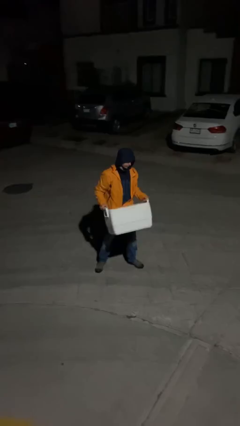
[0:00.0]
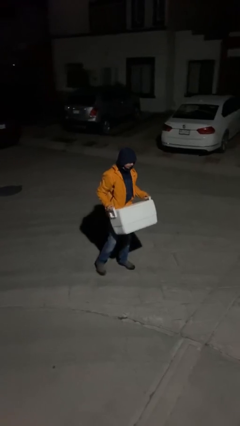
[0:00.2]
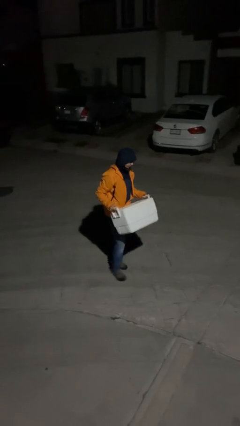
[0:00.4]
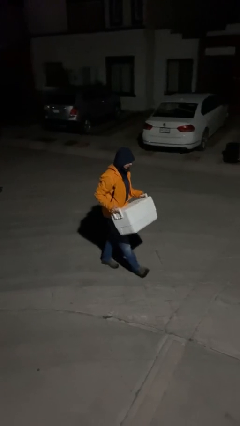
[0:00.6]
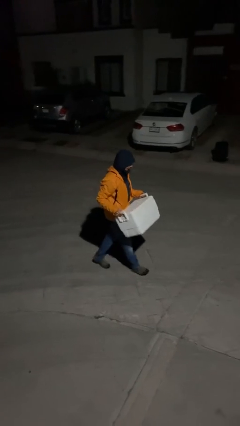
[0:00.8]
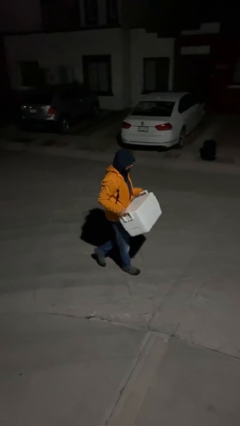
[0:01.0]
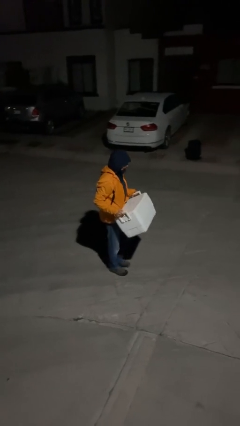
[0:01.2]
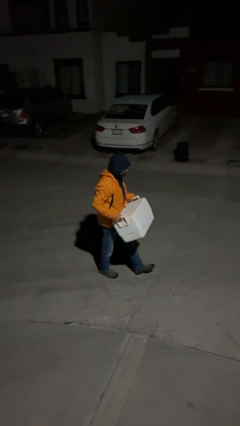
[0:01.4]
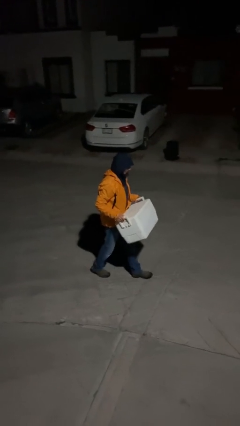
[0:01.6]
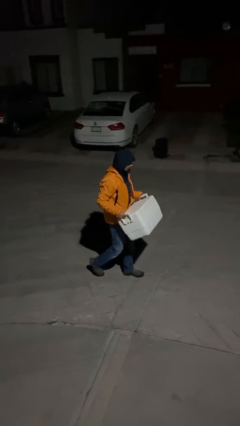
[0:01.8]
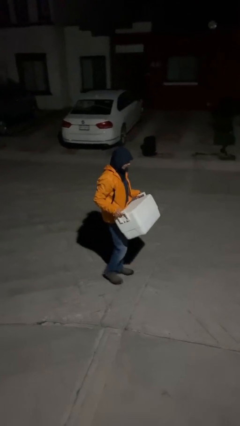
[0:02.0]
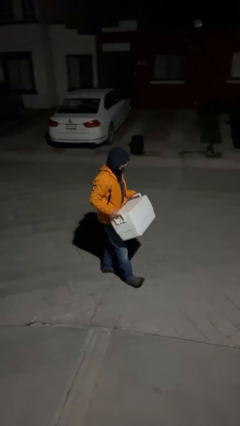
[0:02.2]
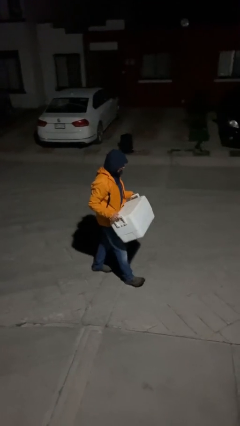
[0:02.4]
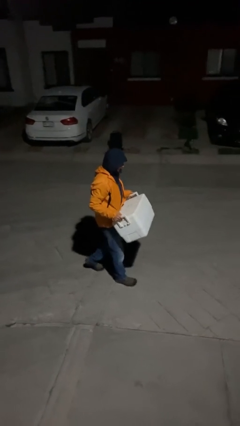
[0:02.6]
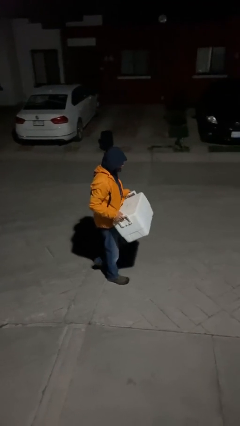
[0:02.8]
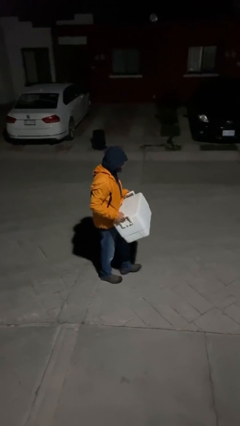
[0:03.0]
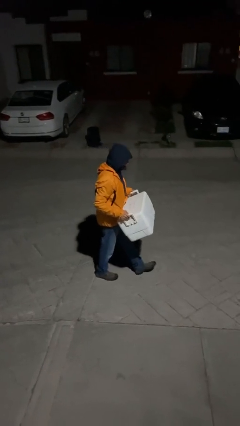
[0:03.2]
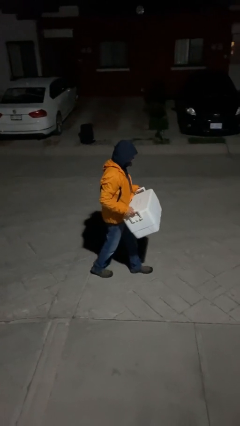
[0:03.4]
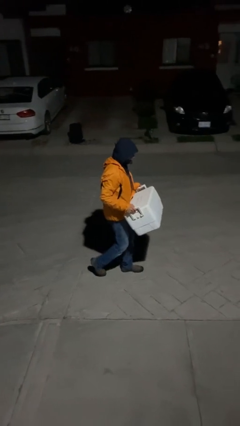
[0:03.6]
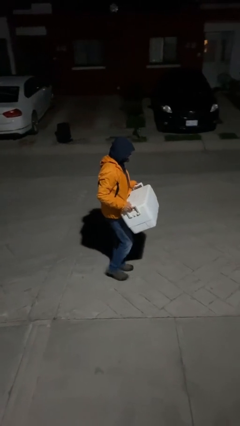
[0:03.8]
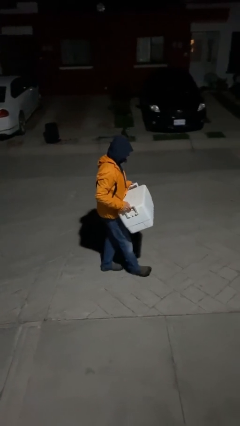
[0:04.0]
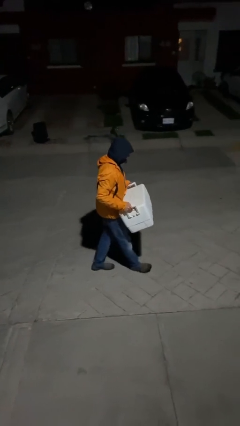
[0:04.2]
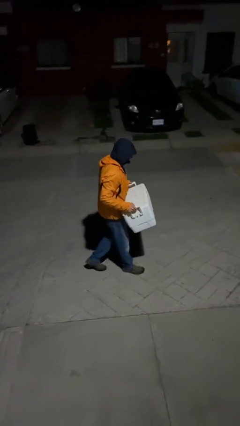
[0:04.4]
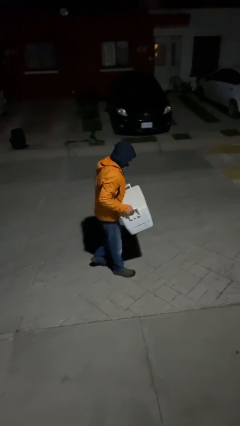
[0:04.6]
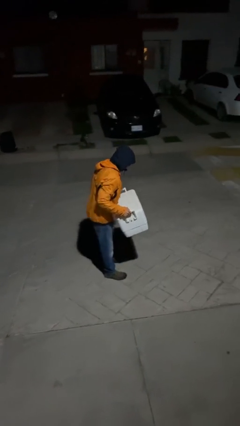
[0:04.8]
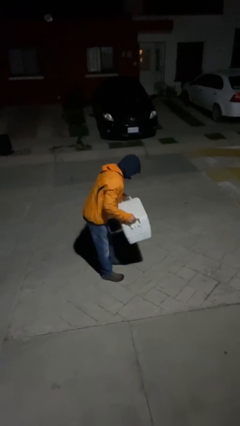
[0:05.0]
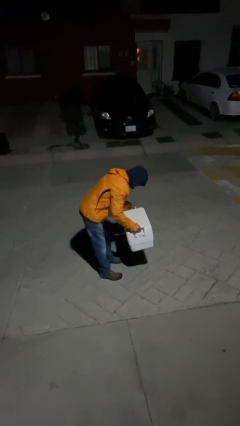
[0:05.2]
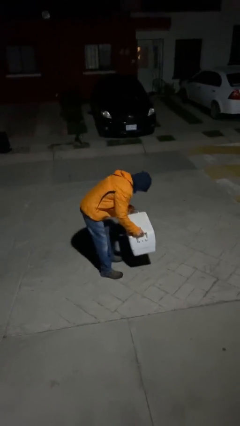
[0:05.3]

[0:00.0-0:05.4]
person carries heavy object

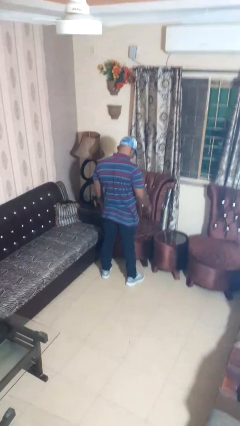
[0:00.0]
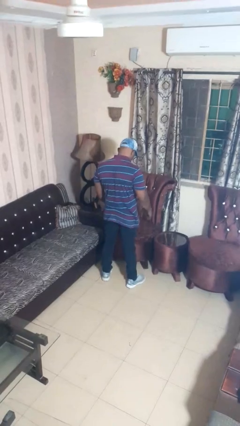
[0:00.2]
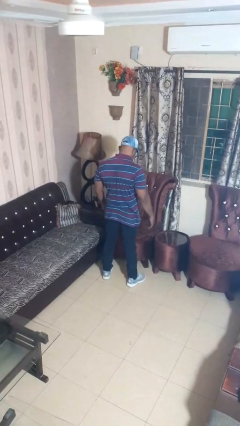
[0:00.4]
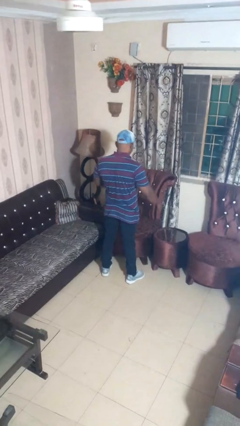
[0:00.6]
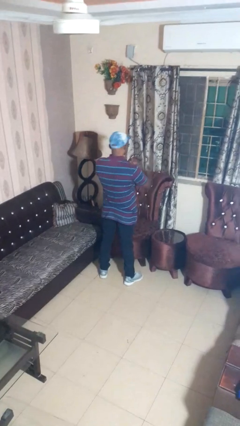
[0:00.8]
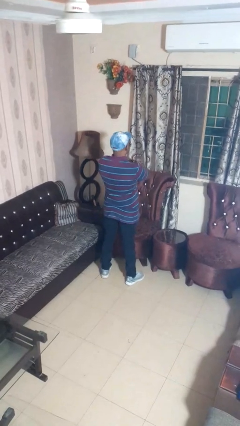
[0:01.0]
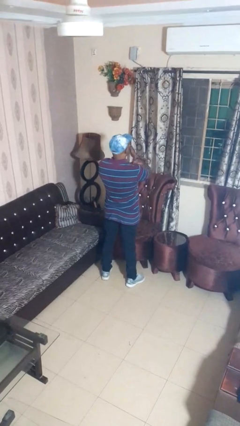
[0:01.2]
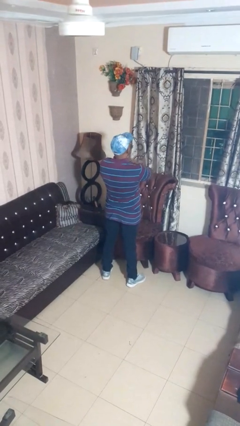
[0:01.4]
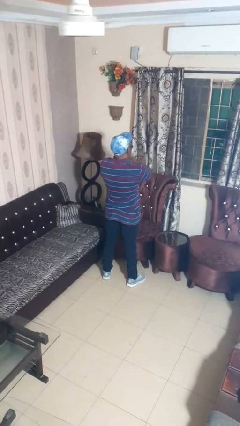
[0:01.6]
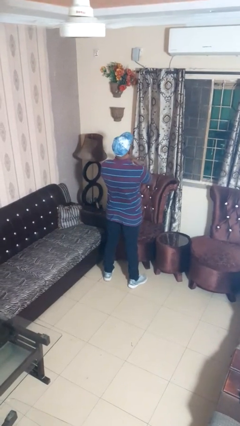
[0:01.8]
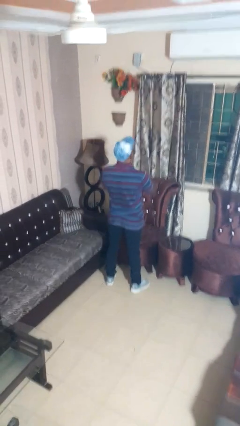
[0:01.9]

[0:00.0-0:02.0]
person drums on chest

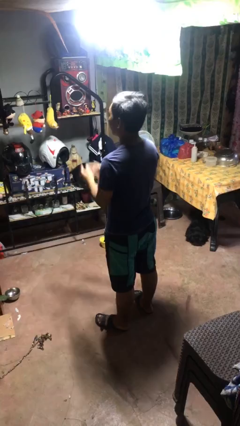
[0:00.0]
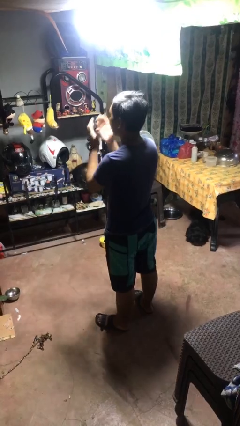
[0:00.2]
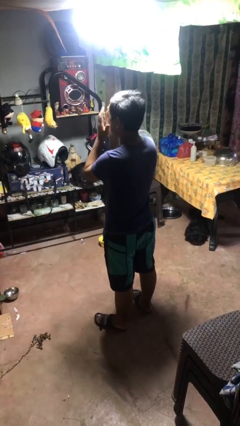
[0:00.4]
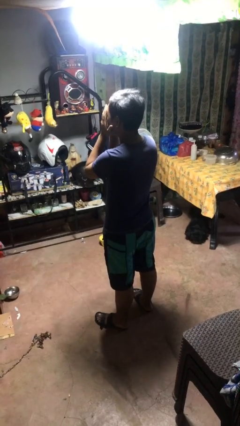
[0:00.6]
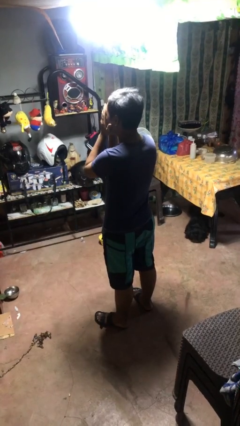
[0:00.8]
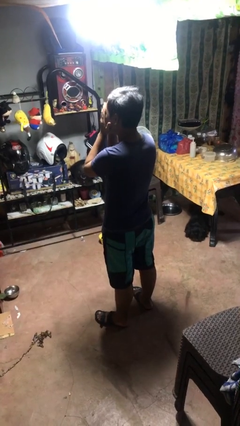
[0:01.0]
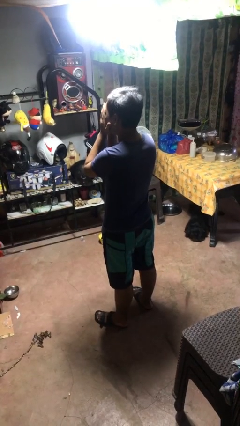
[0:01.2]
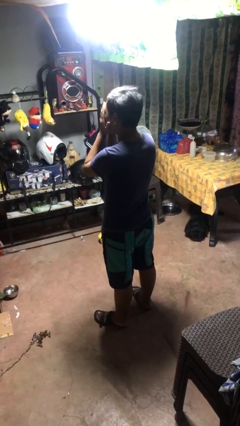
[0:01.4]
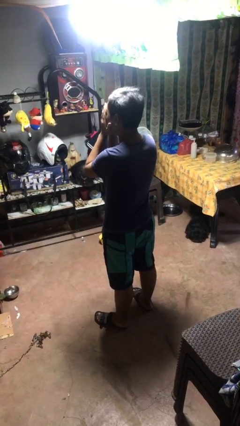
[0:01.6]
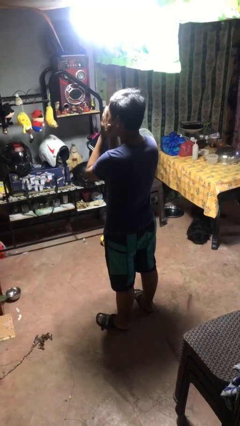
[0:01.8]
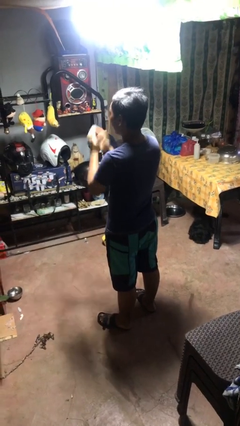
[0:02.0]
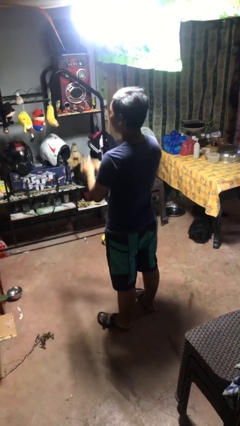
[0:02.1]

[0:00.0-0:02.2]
person covers face with hands

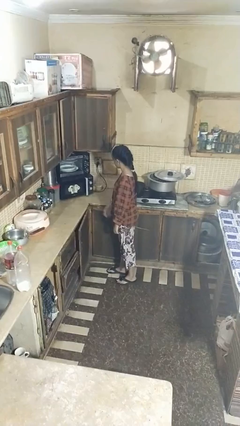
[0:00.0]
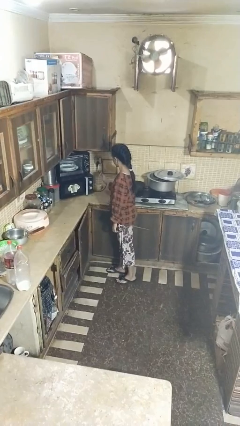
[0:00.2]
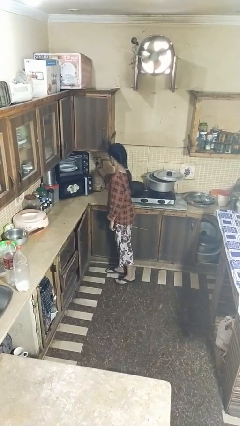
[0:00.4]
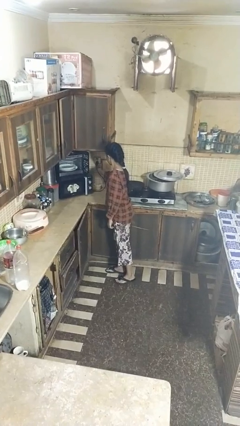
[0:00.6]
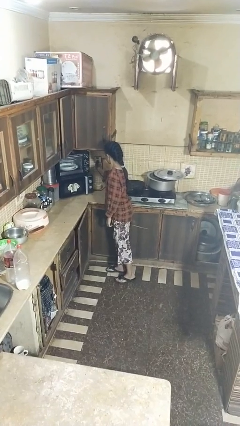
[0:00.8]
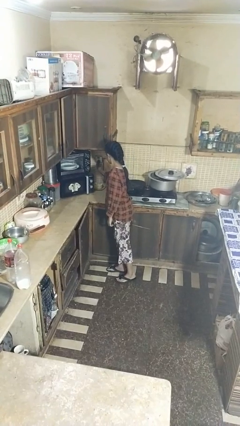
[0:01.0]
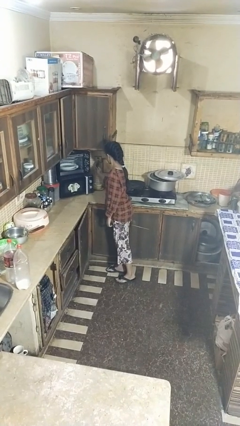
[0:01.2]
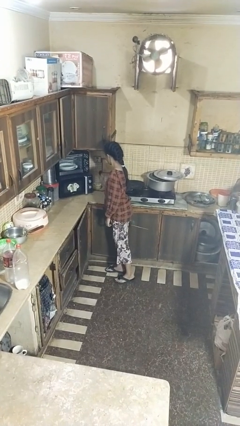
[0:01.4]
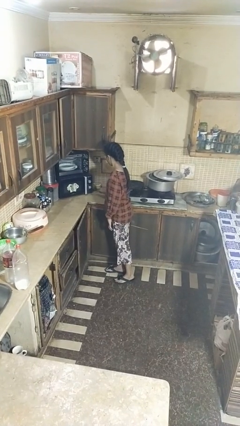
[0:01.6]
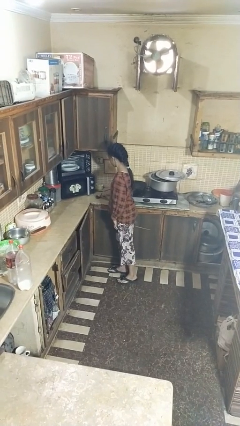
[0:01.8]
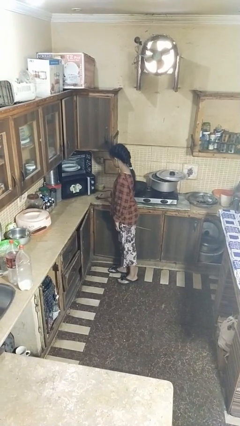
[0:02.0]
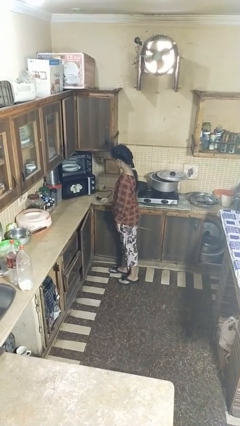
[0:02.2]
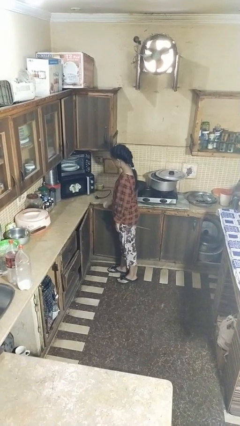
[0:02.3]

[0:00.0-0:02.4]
person unplugs from electrical socket

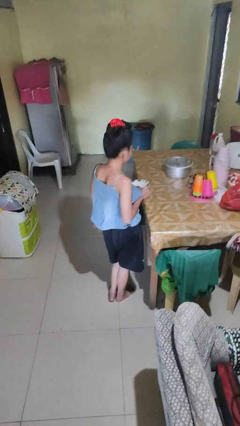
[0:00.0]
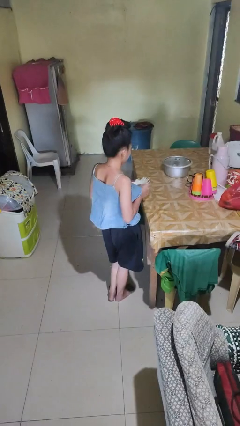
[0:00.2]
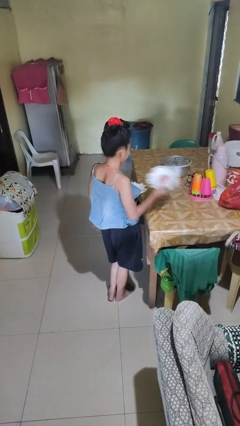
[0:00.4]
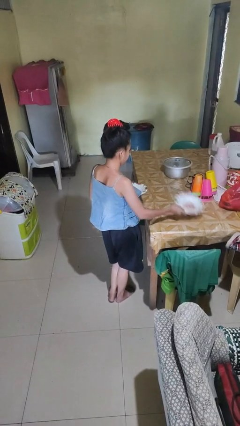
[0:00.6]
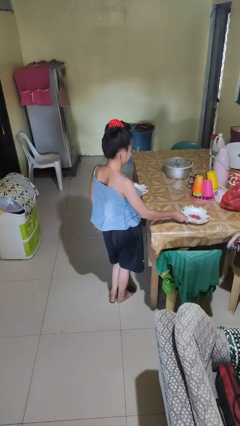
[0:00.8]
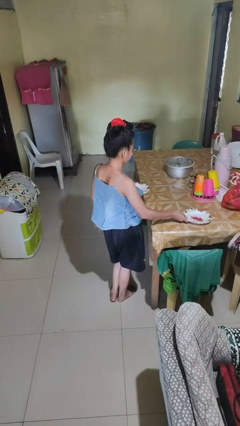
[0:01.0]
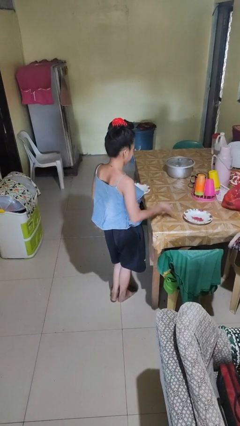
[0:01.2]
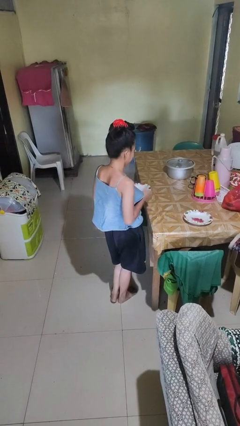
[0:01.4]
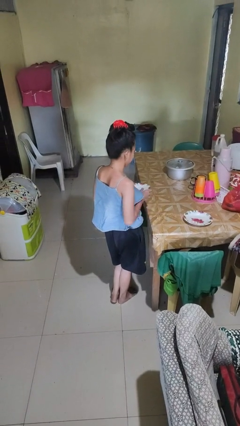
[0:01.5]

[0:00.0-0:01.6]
person sets table

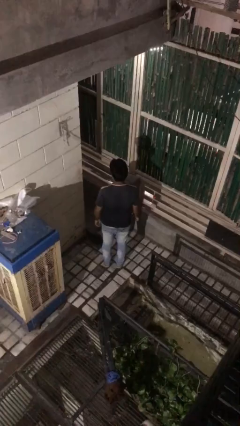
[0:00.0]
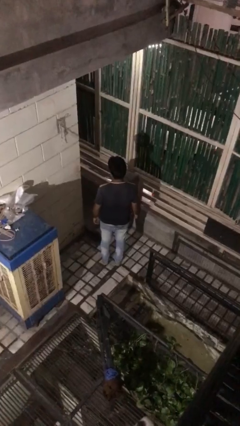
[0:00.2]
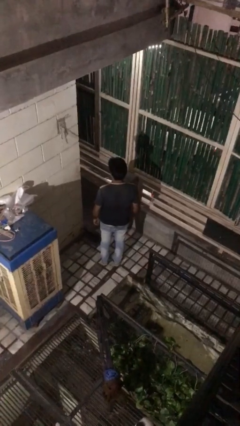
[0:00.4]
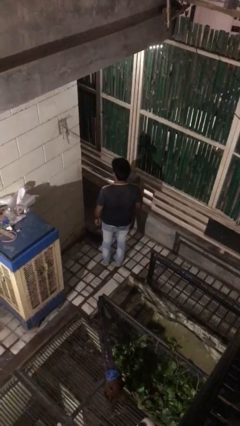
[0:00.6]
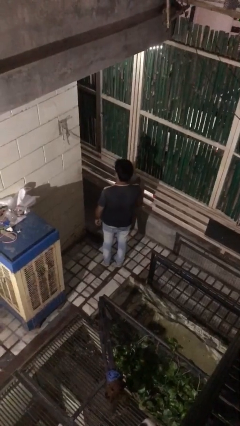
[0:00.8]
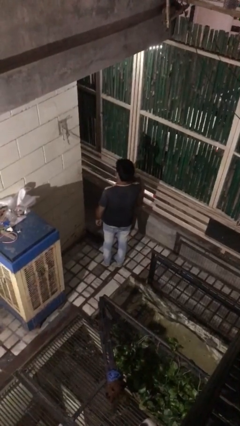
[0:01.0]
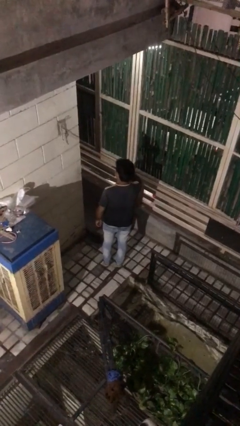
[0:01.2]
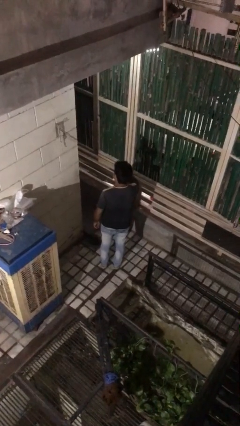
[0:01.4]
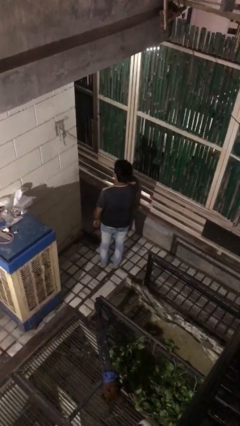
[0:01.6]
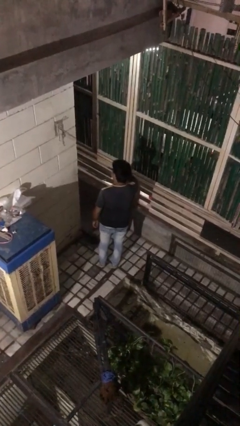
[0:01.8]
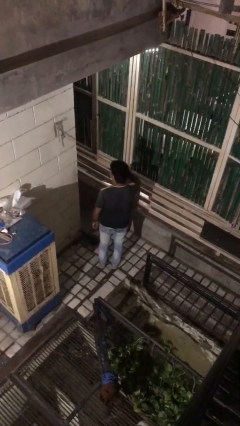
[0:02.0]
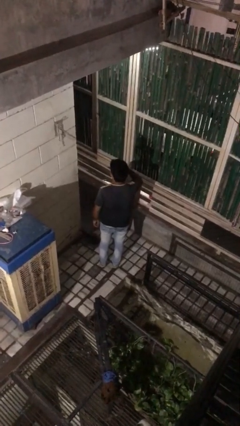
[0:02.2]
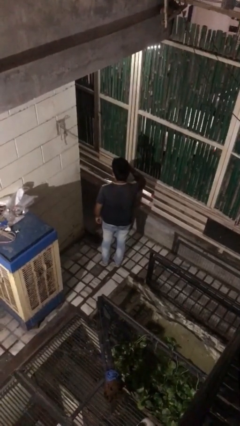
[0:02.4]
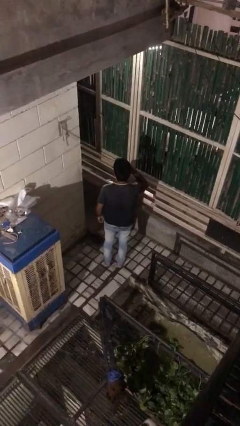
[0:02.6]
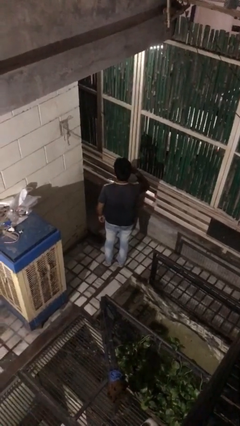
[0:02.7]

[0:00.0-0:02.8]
person brushes teeth

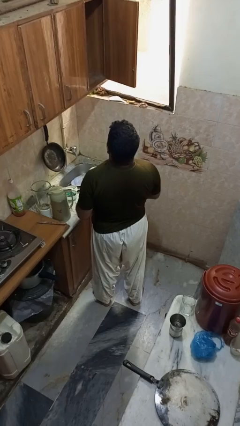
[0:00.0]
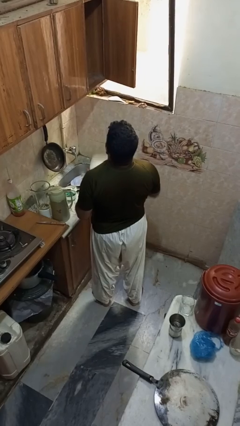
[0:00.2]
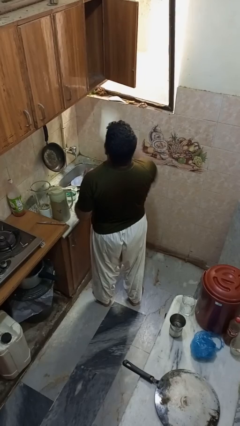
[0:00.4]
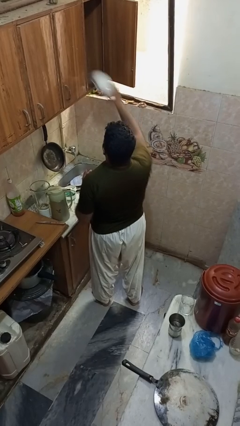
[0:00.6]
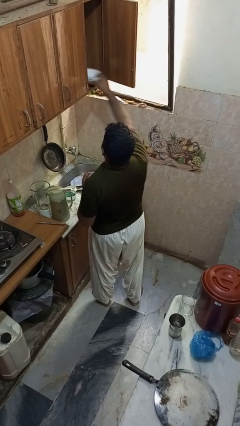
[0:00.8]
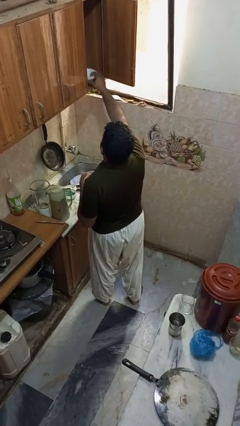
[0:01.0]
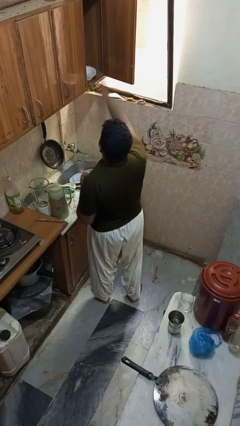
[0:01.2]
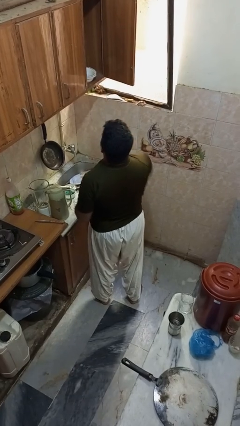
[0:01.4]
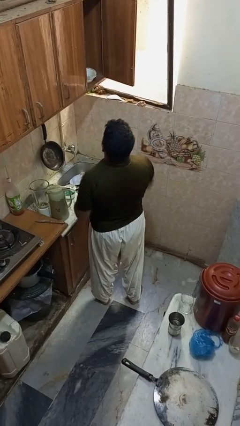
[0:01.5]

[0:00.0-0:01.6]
person puts object in cabinet
